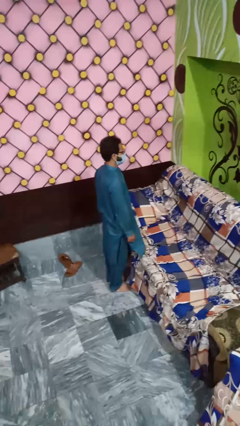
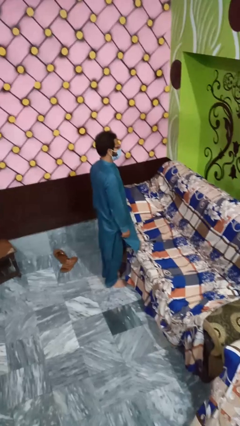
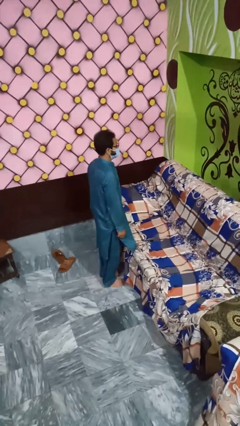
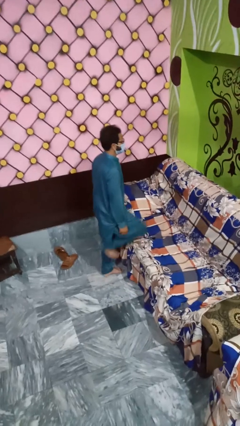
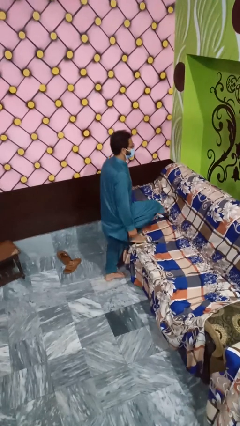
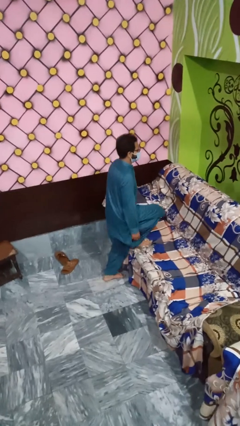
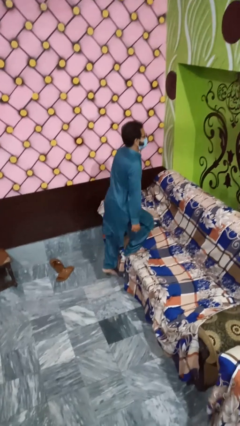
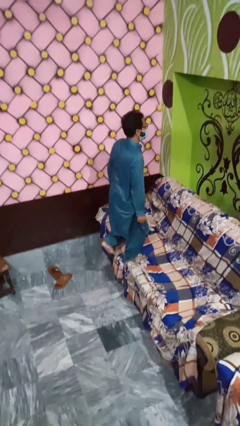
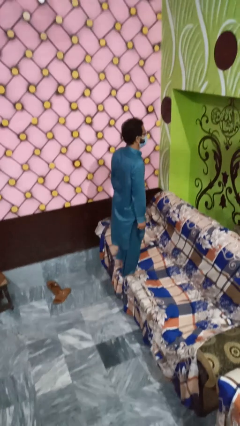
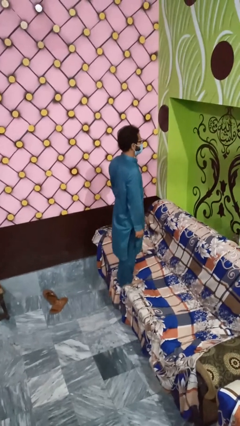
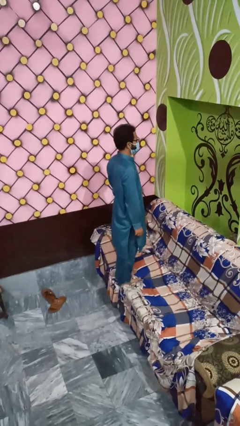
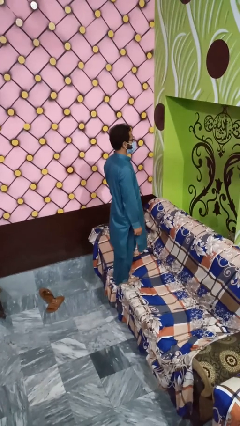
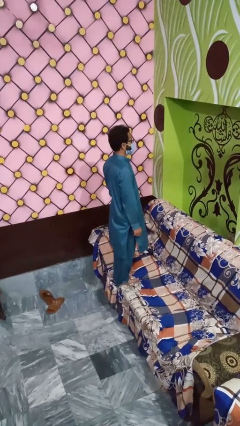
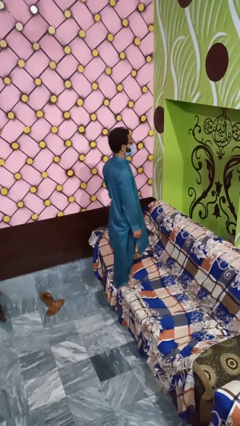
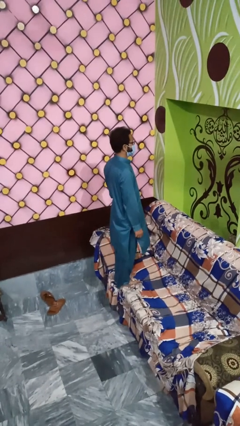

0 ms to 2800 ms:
person climbs on couch

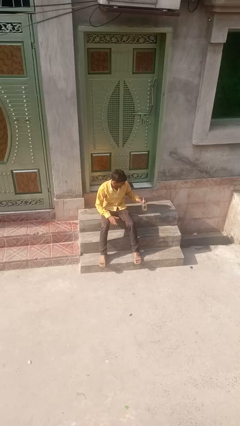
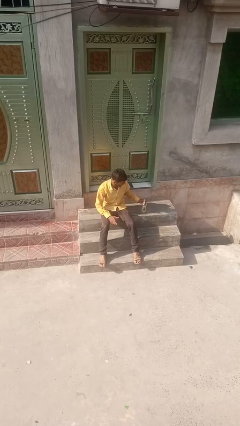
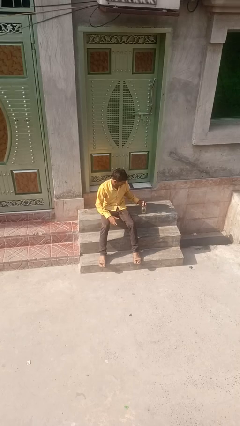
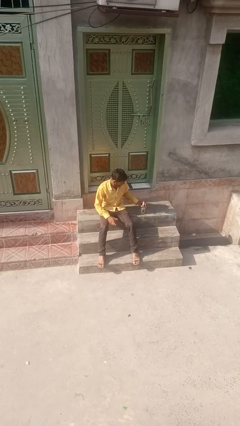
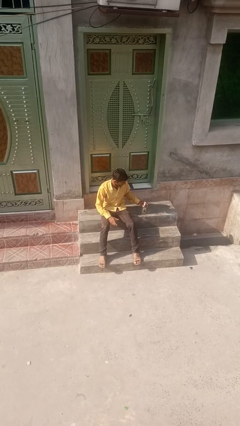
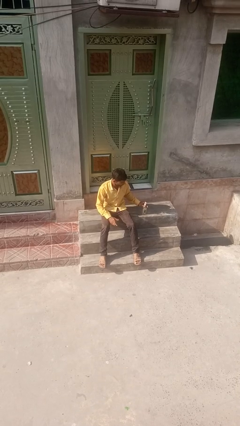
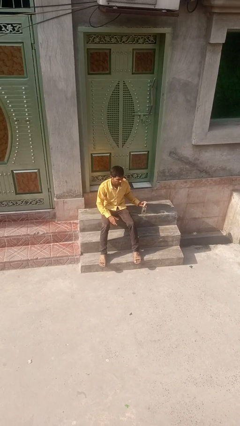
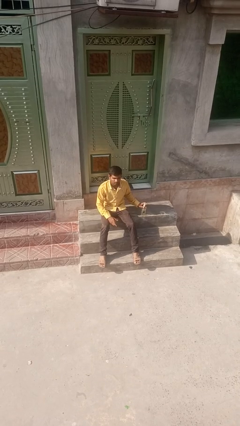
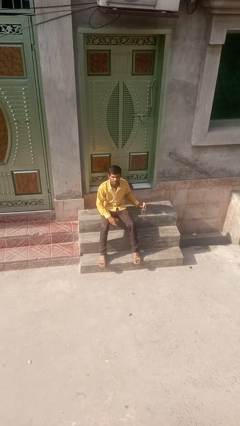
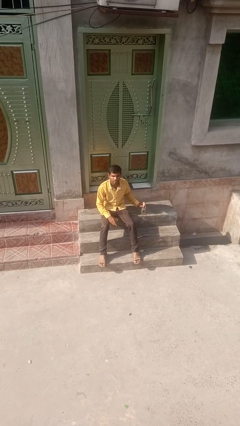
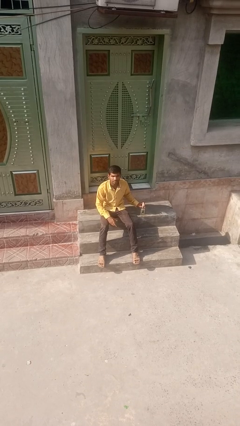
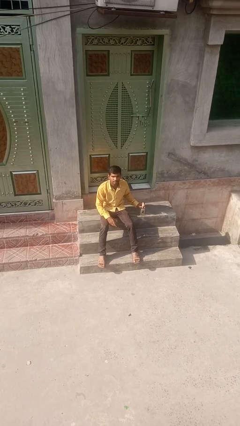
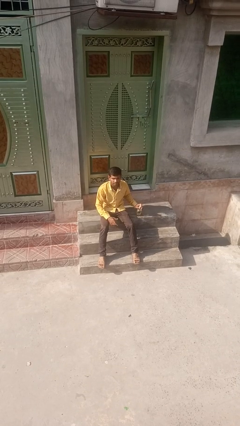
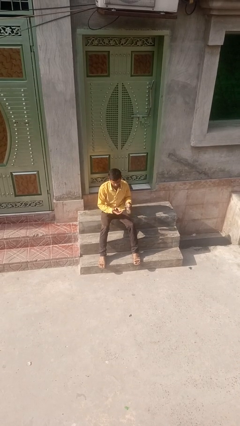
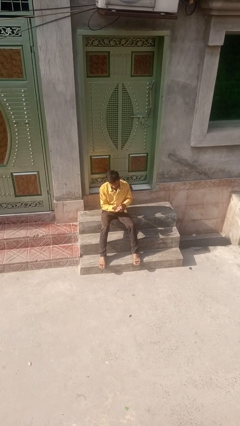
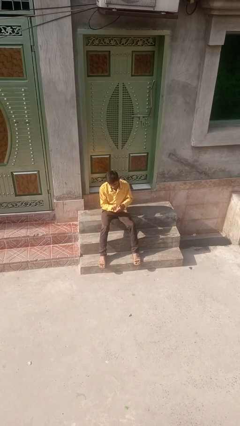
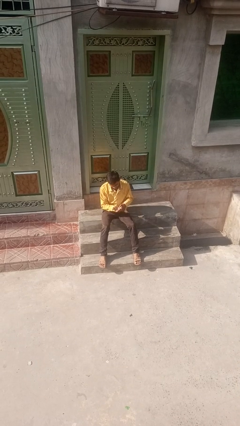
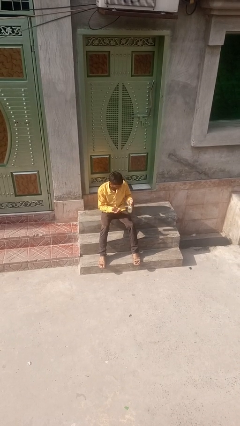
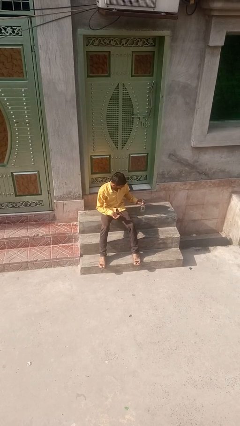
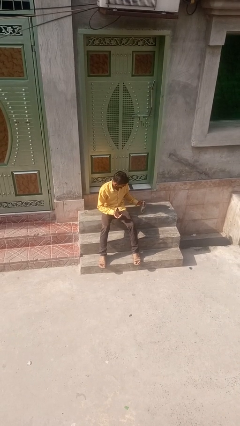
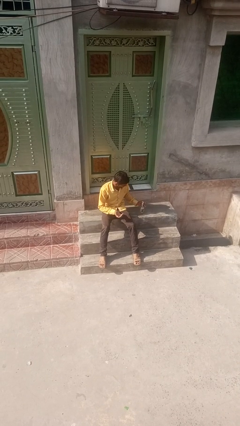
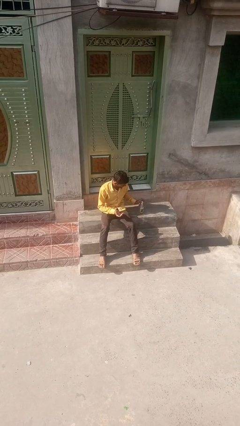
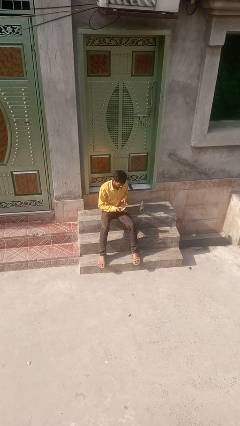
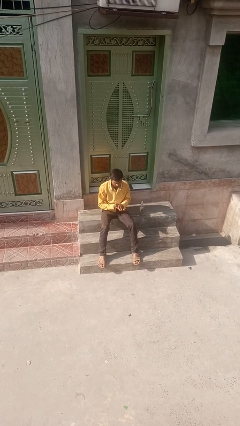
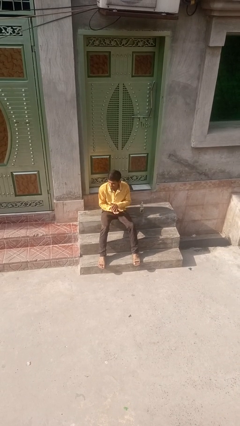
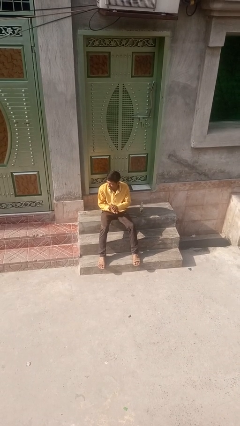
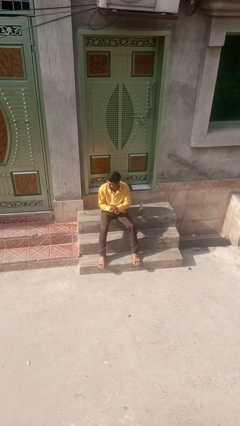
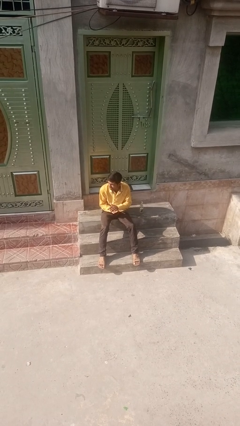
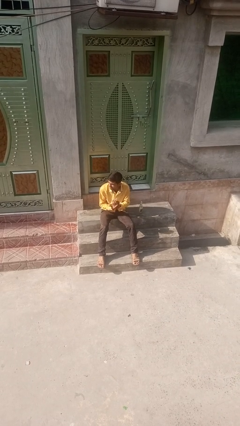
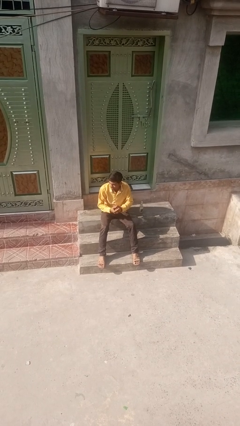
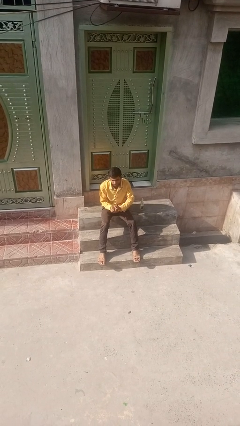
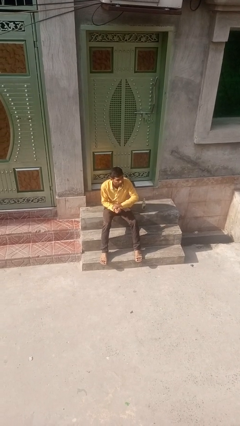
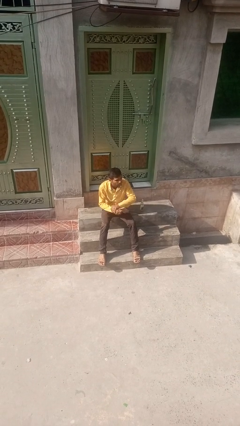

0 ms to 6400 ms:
person applies facial moisturizer

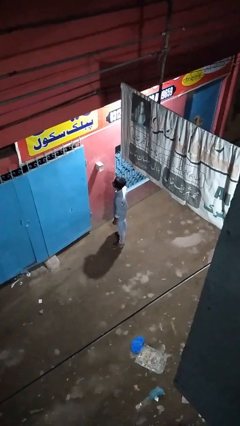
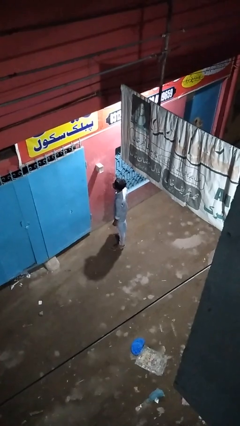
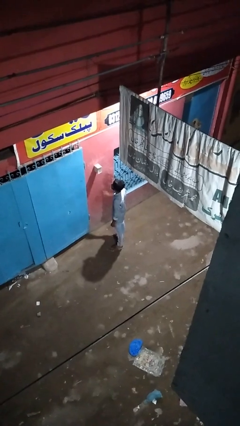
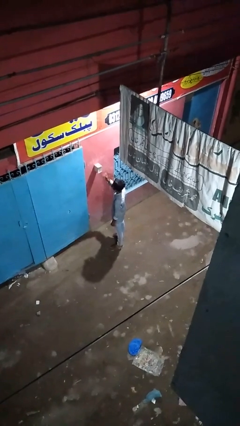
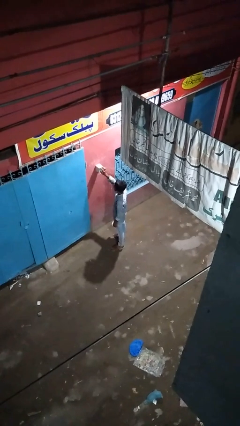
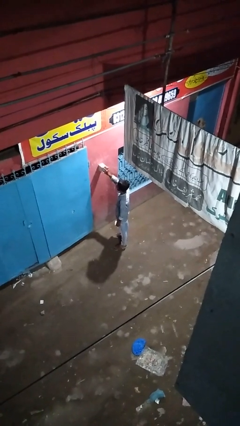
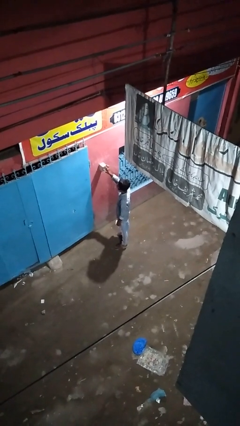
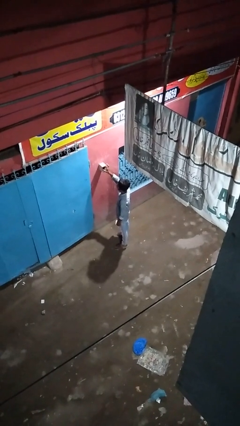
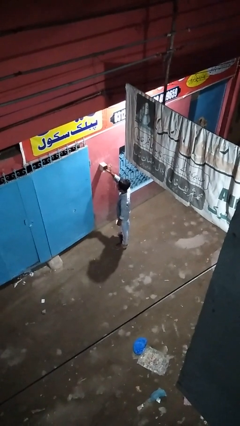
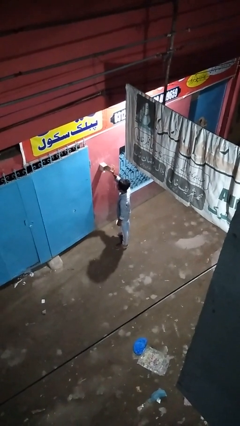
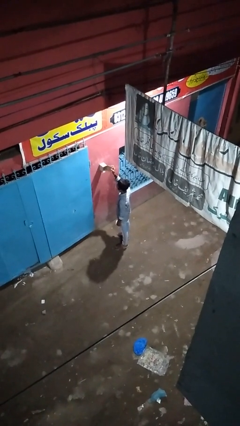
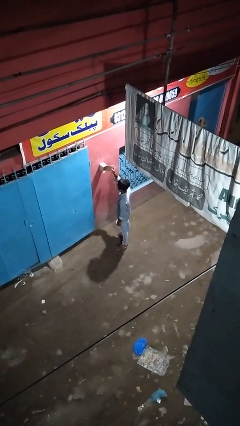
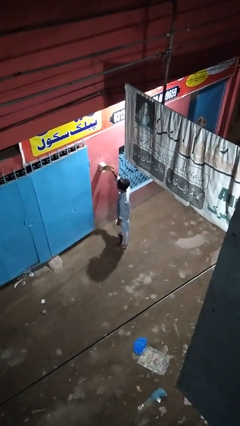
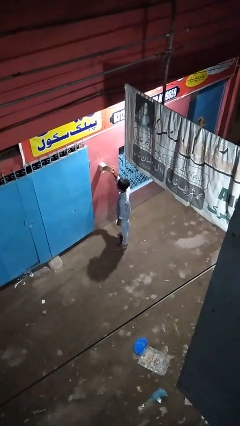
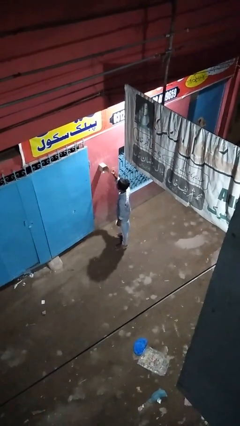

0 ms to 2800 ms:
person opens mailbox

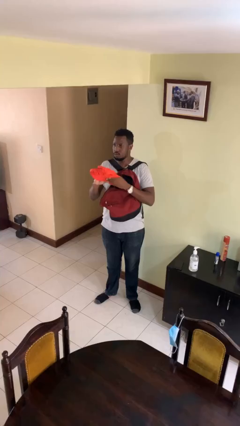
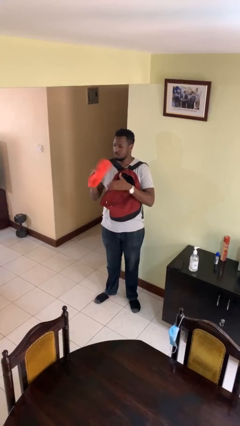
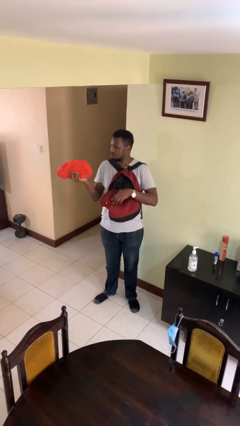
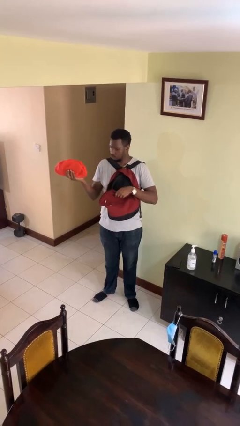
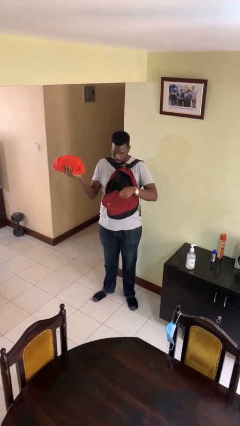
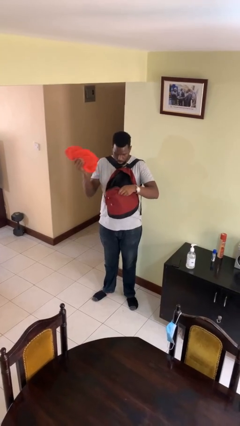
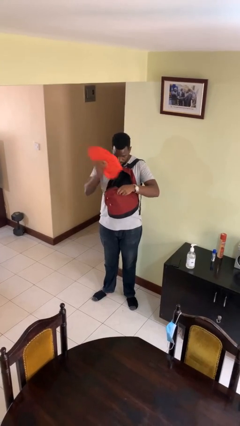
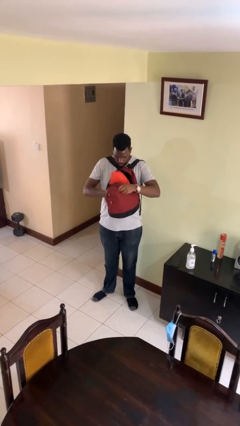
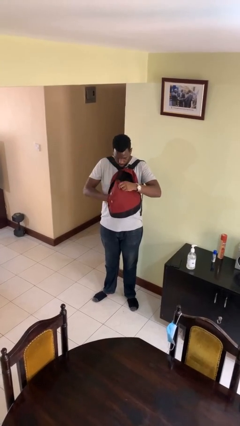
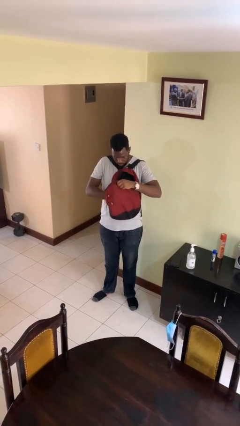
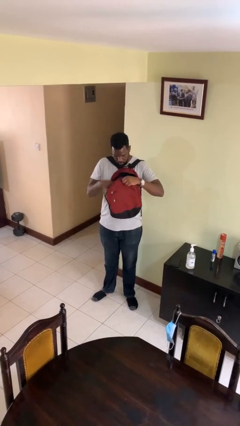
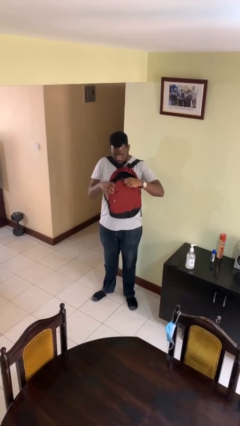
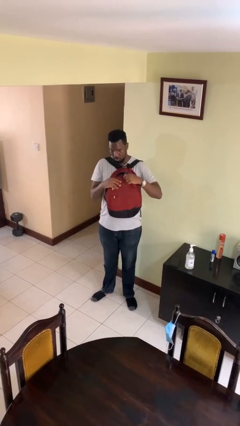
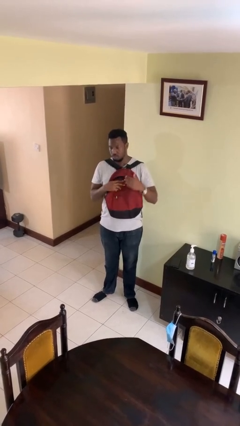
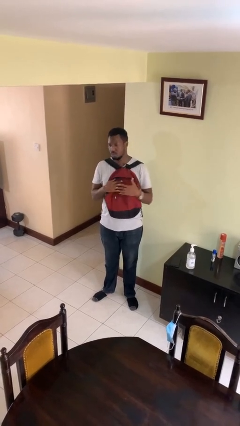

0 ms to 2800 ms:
person puts object into backpack

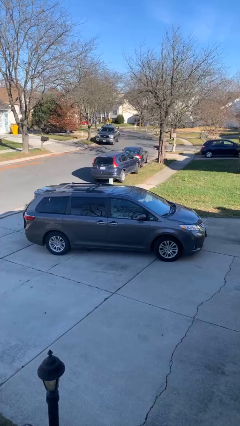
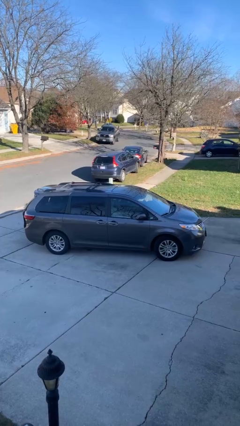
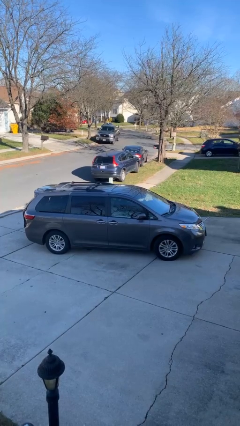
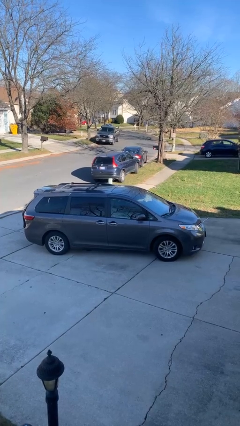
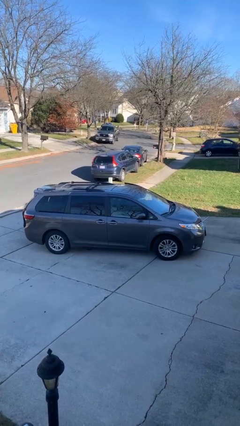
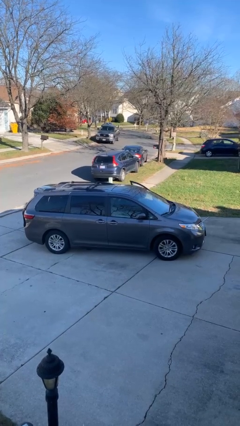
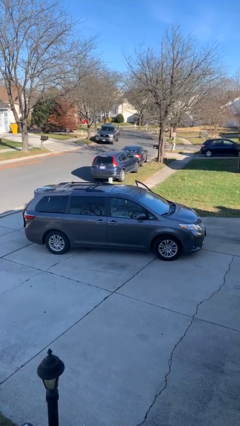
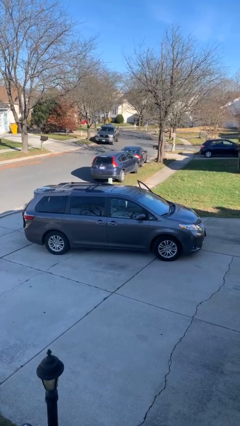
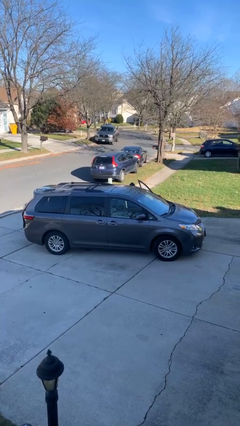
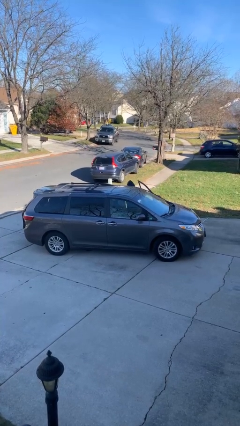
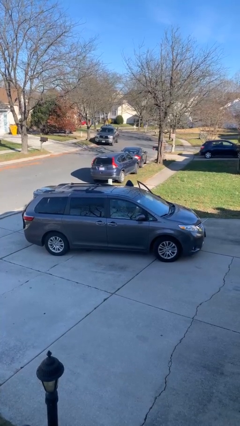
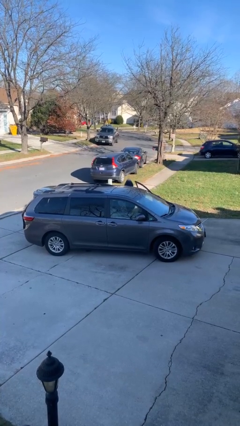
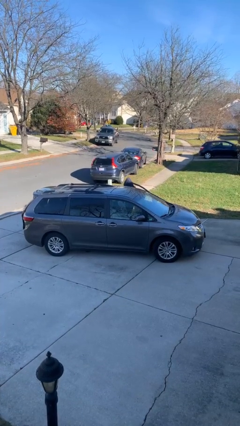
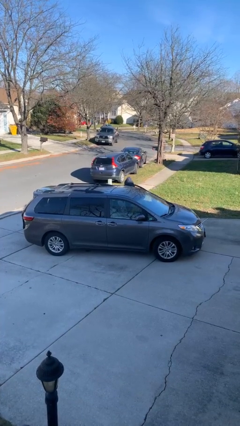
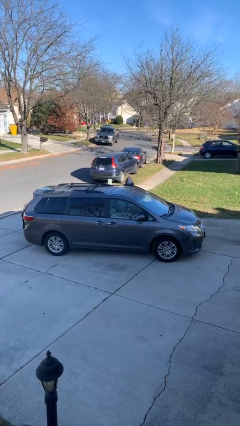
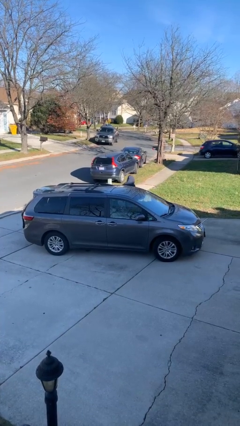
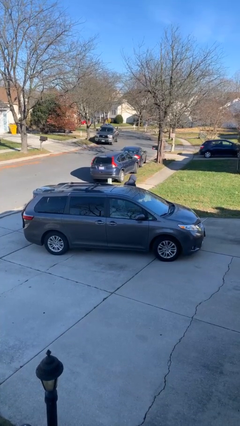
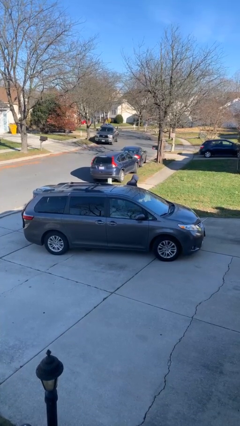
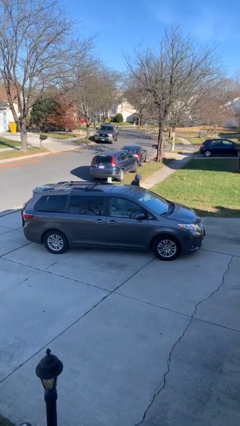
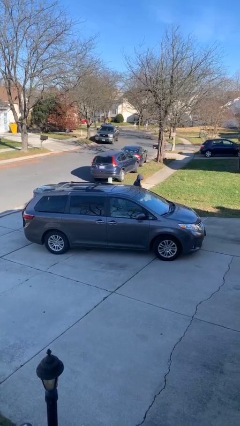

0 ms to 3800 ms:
car drops off person
